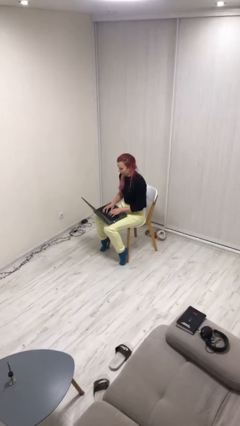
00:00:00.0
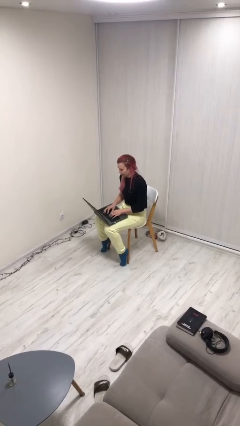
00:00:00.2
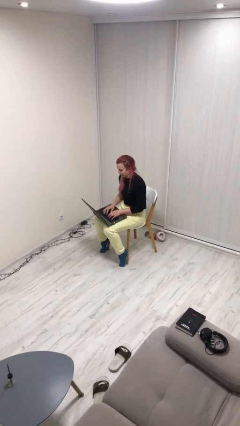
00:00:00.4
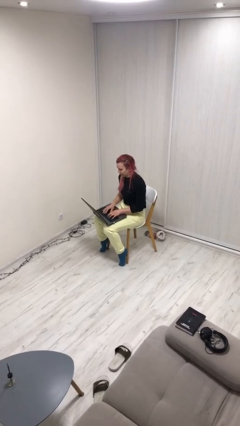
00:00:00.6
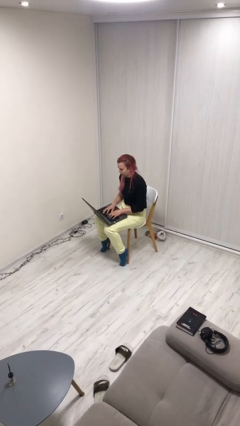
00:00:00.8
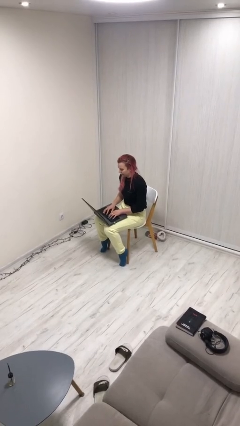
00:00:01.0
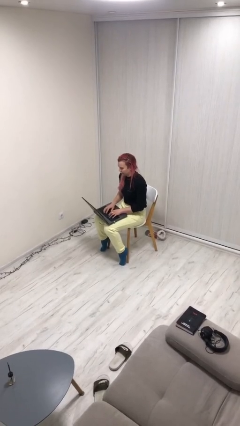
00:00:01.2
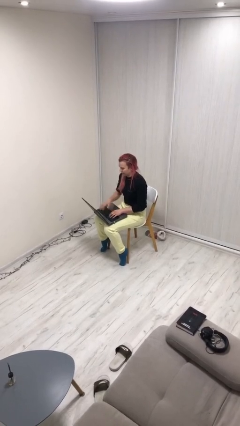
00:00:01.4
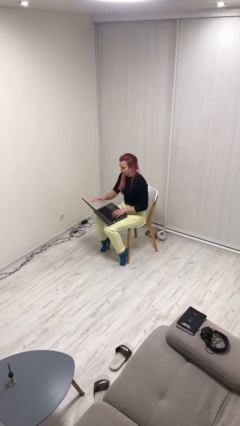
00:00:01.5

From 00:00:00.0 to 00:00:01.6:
person interacts with laptop

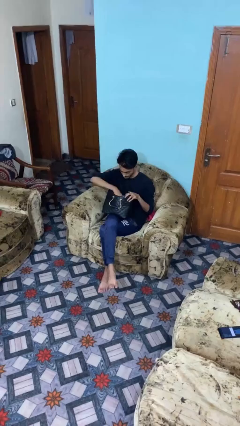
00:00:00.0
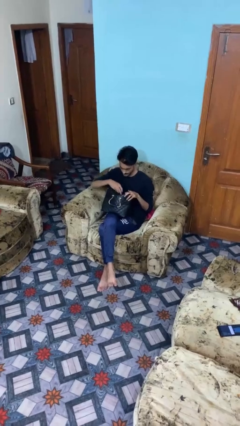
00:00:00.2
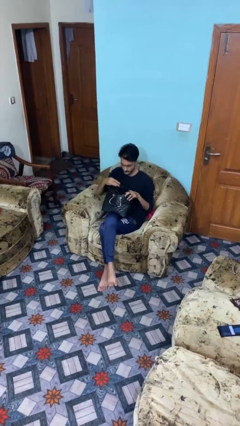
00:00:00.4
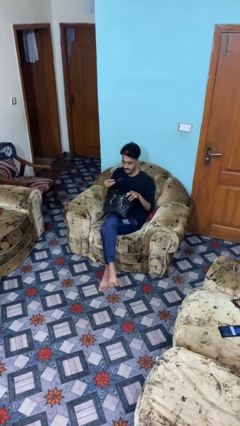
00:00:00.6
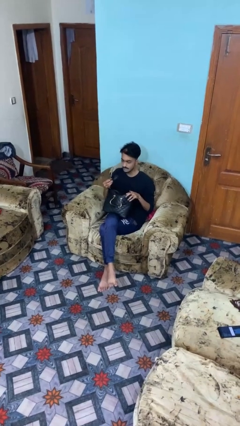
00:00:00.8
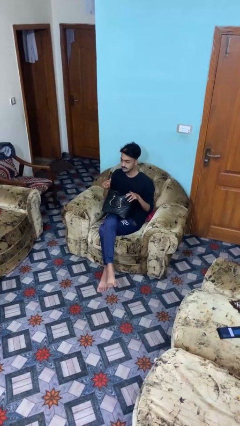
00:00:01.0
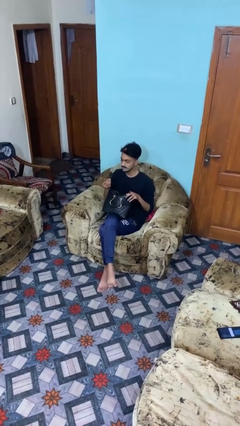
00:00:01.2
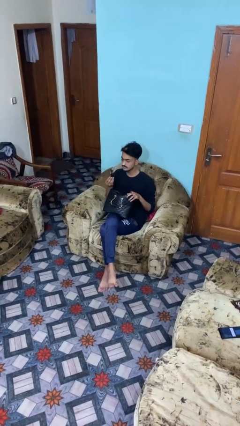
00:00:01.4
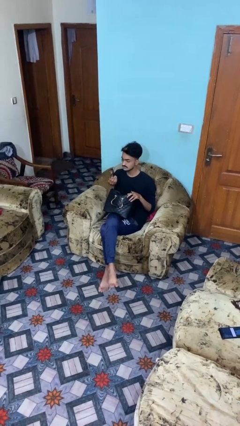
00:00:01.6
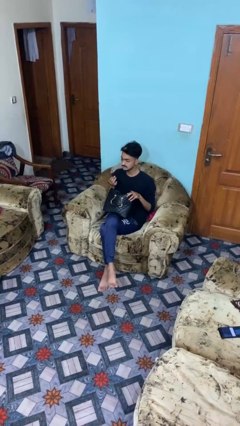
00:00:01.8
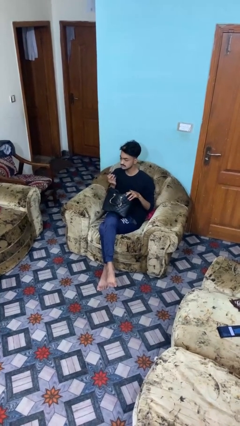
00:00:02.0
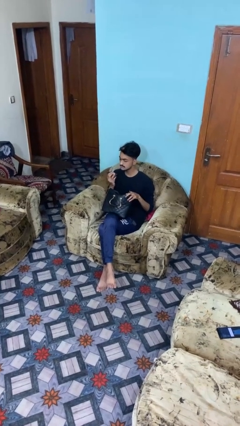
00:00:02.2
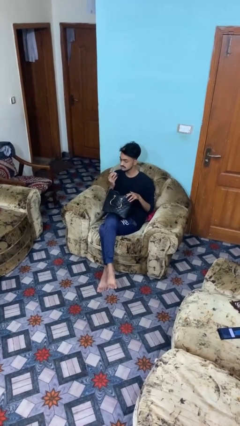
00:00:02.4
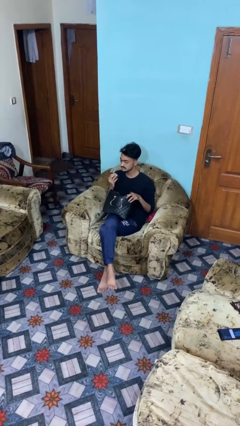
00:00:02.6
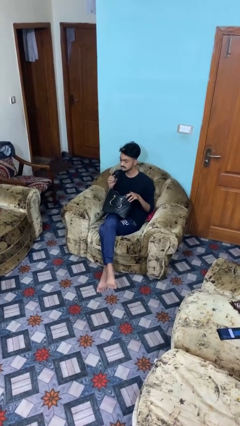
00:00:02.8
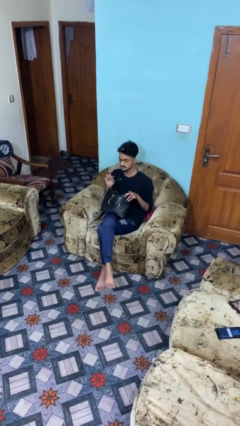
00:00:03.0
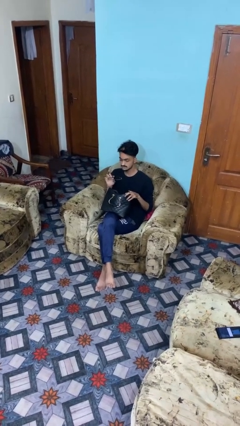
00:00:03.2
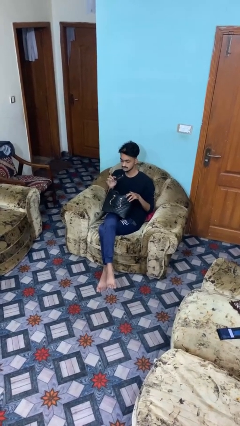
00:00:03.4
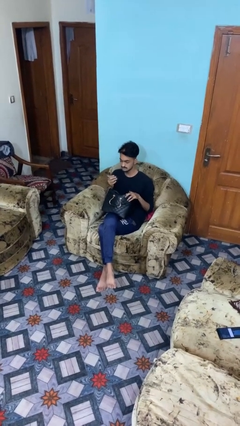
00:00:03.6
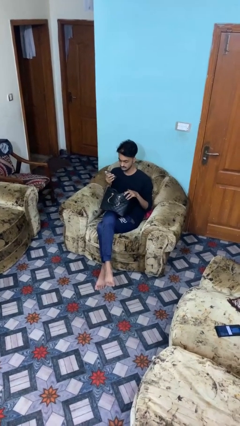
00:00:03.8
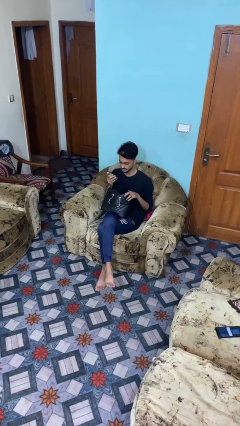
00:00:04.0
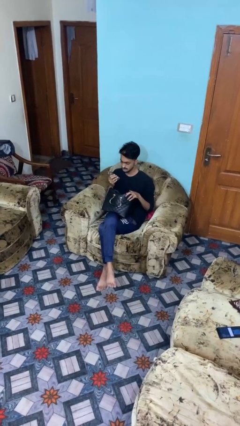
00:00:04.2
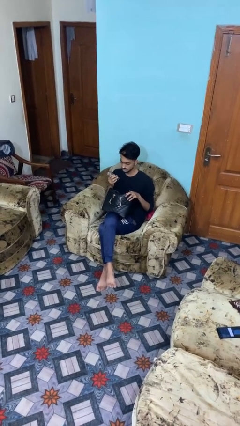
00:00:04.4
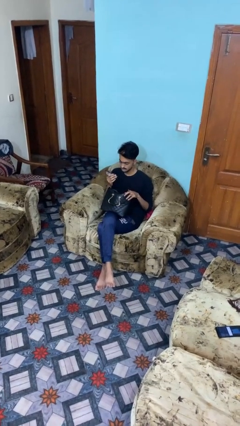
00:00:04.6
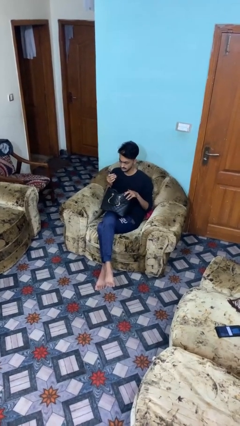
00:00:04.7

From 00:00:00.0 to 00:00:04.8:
person takes object from purse

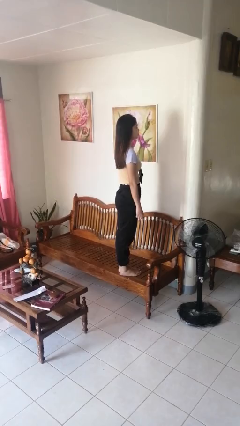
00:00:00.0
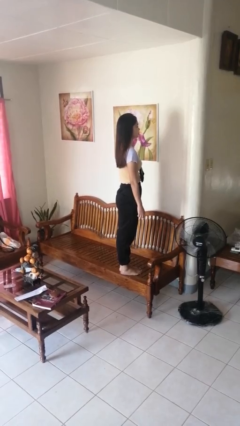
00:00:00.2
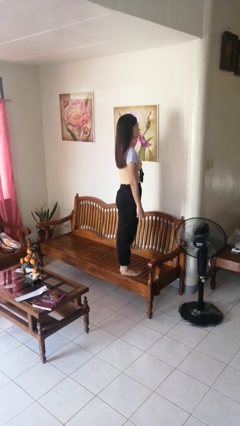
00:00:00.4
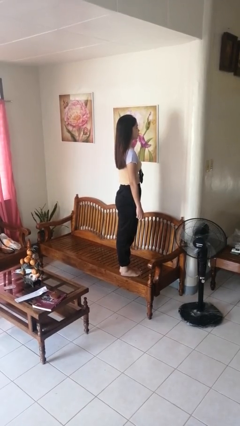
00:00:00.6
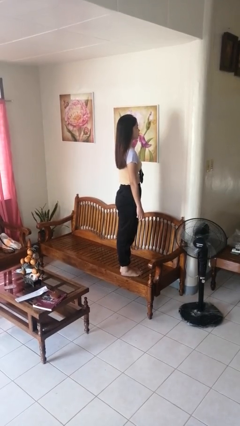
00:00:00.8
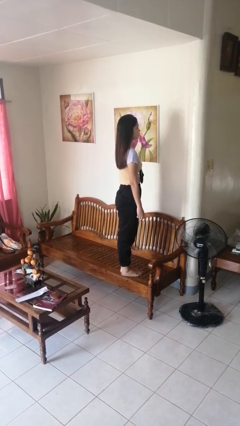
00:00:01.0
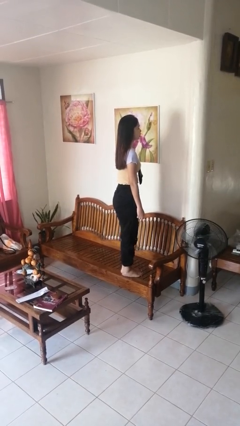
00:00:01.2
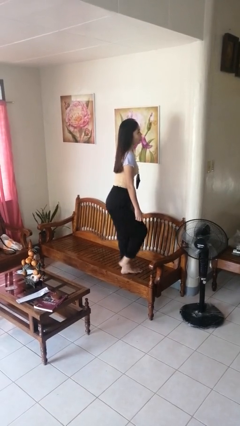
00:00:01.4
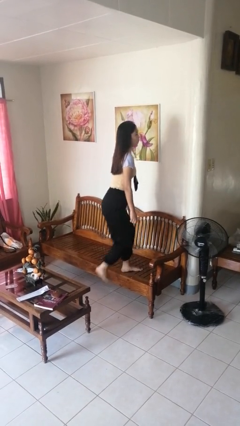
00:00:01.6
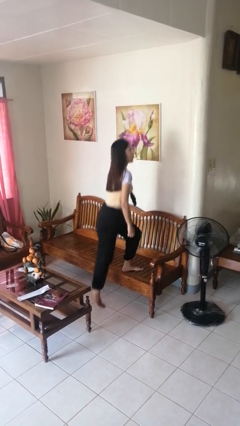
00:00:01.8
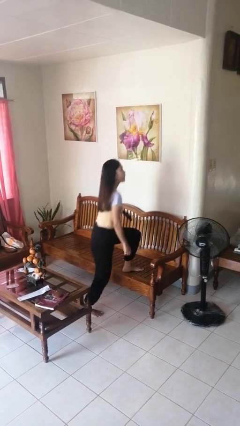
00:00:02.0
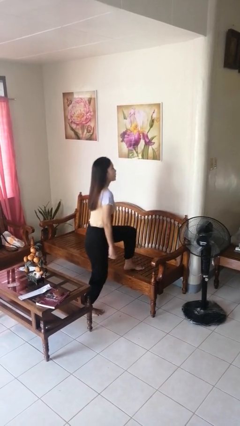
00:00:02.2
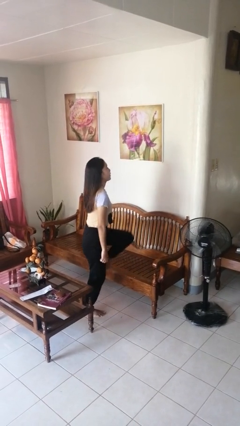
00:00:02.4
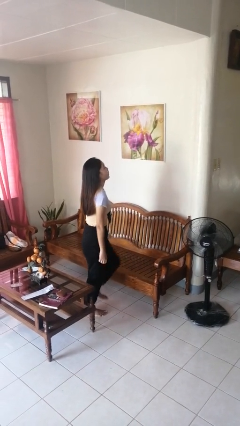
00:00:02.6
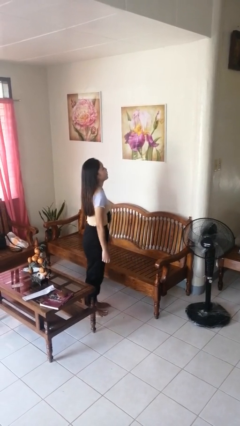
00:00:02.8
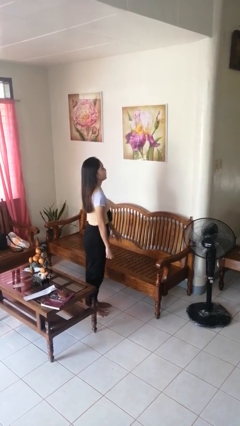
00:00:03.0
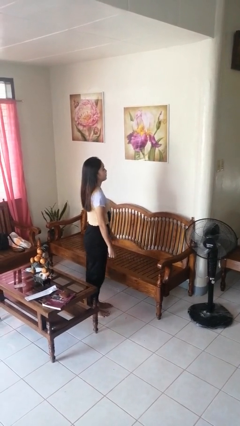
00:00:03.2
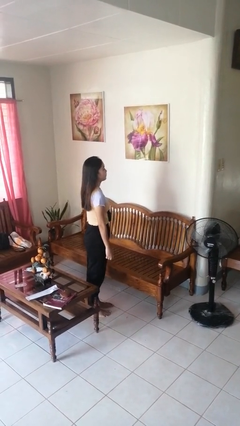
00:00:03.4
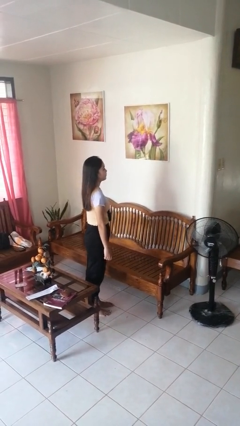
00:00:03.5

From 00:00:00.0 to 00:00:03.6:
person climbs off chair

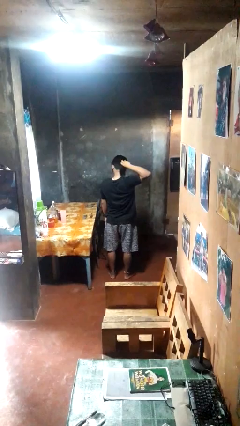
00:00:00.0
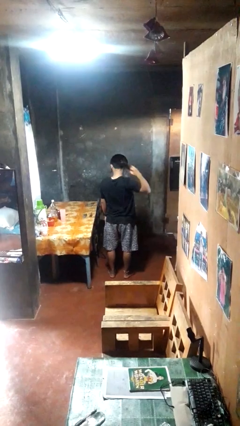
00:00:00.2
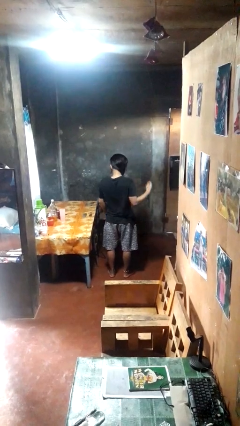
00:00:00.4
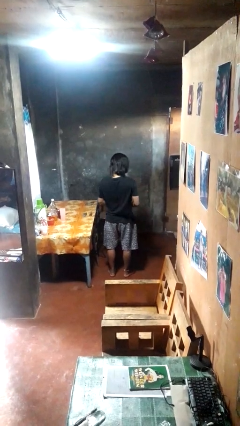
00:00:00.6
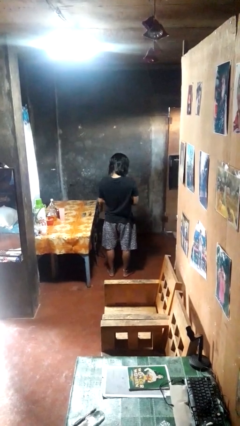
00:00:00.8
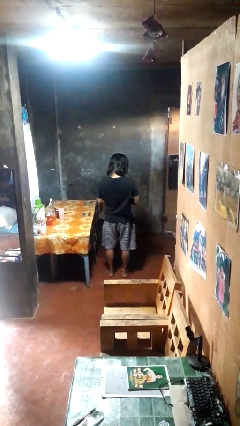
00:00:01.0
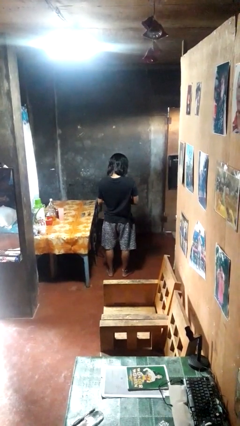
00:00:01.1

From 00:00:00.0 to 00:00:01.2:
person takes off hairtie

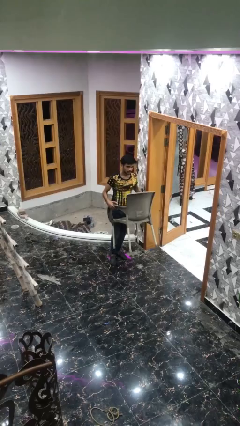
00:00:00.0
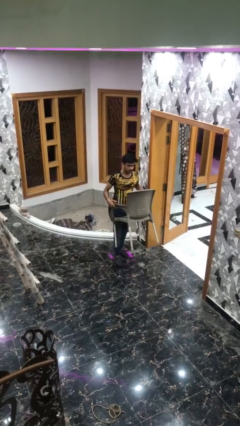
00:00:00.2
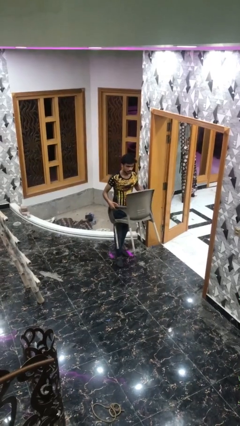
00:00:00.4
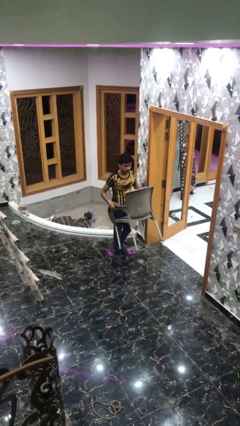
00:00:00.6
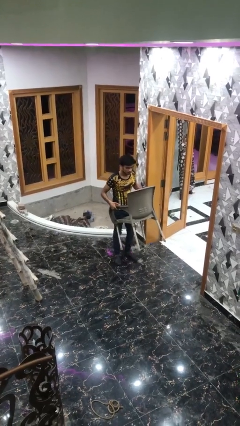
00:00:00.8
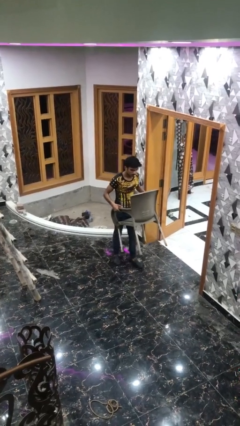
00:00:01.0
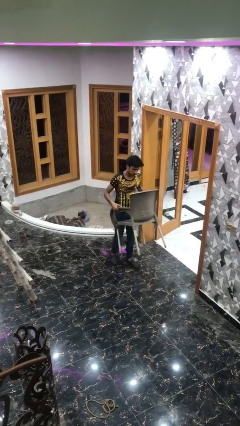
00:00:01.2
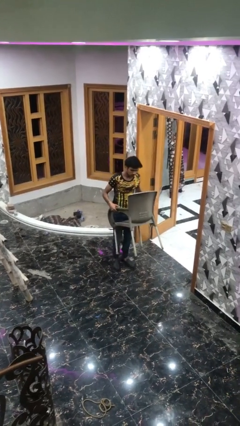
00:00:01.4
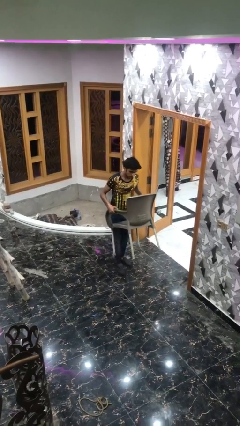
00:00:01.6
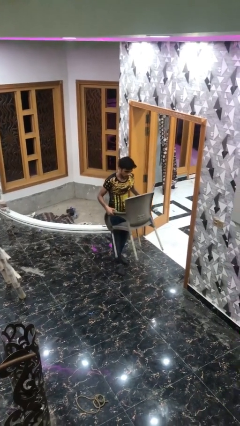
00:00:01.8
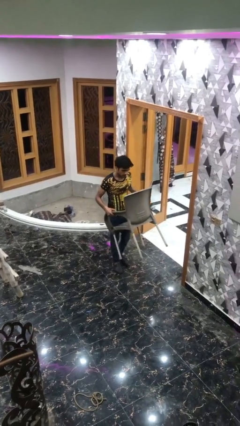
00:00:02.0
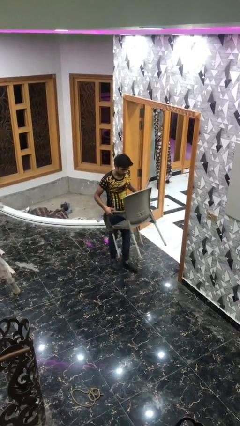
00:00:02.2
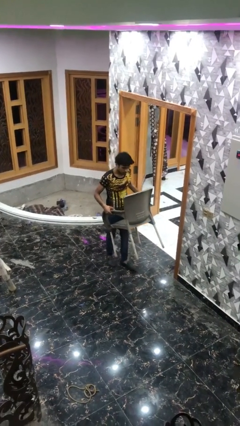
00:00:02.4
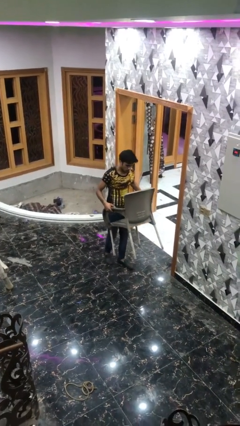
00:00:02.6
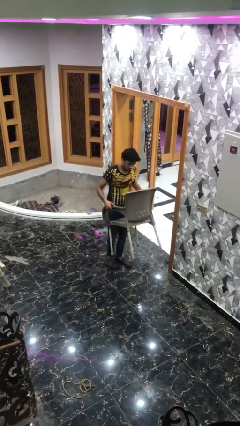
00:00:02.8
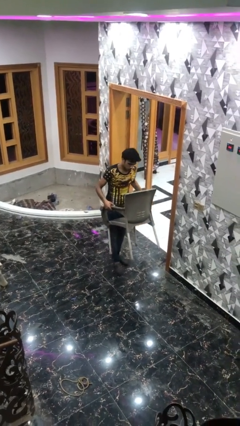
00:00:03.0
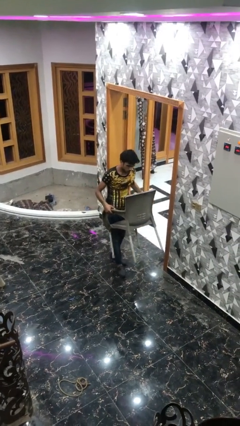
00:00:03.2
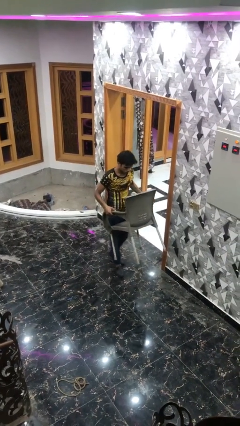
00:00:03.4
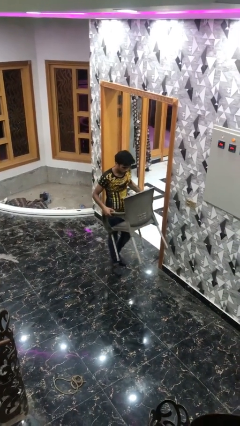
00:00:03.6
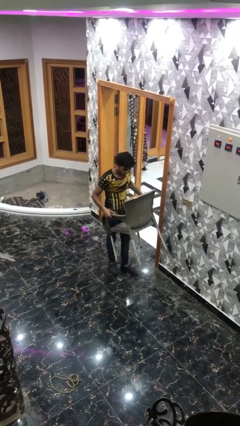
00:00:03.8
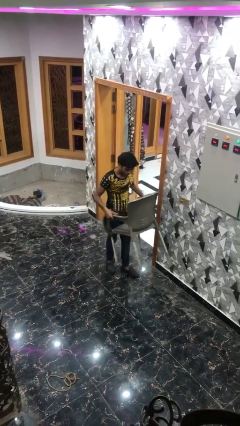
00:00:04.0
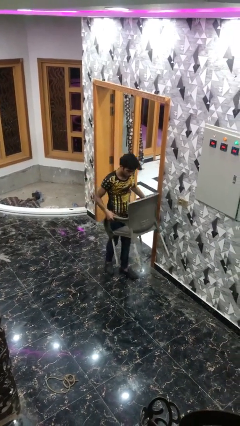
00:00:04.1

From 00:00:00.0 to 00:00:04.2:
person carries heavy object

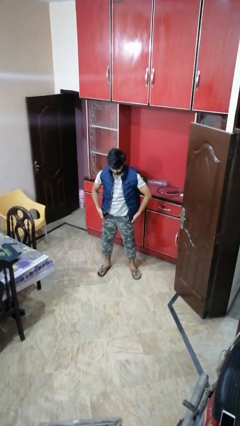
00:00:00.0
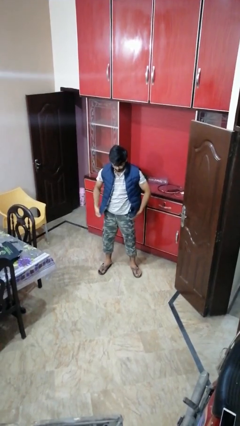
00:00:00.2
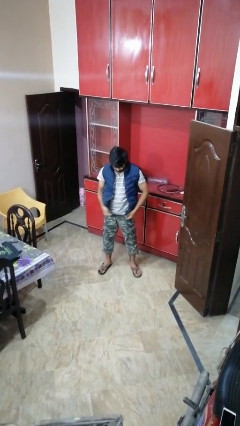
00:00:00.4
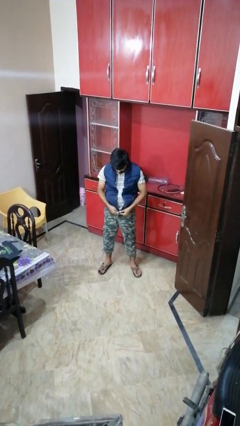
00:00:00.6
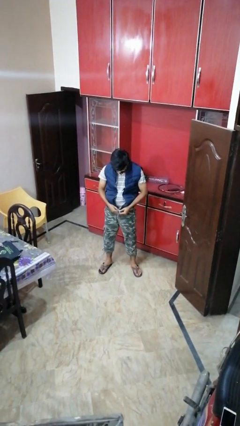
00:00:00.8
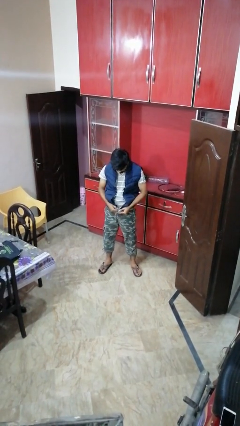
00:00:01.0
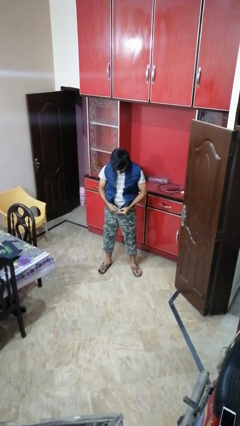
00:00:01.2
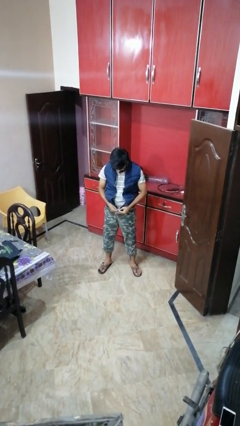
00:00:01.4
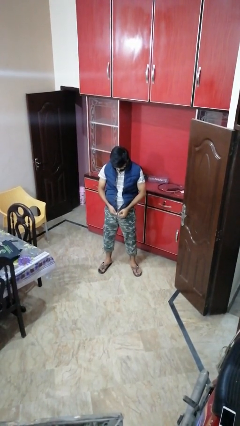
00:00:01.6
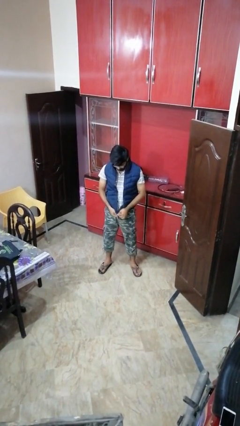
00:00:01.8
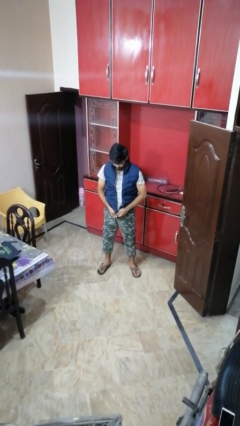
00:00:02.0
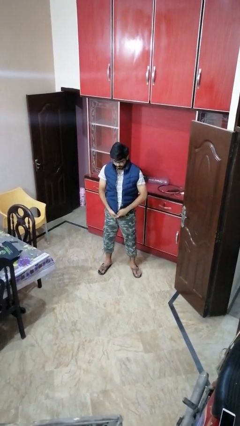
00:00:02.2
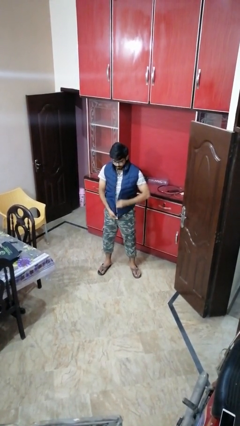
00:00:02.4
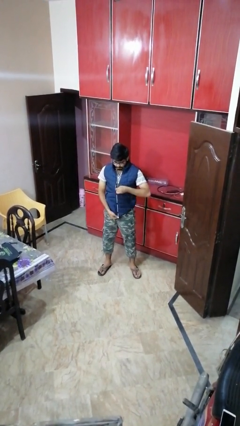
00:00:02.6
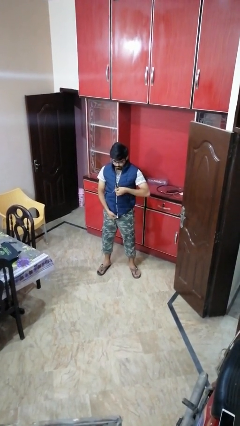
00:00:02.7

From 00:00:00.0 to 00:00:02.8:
person zips up jacket
